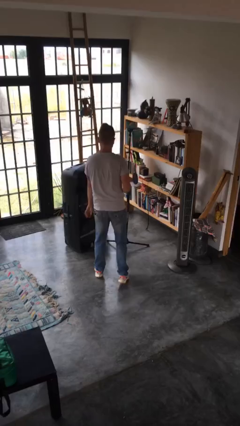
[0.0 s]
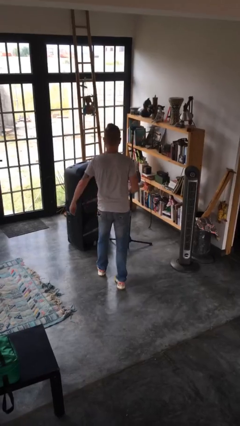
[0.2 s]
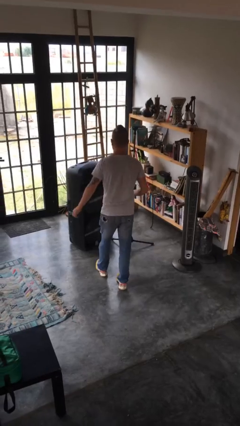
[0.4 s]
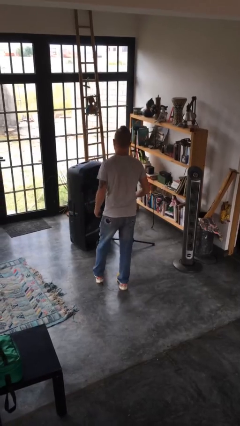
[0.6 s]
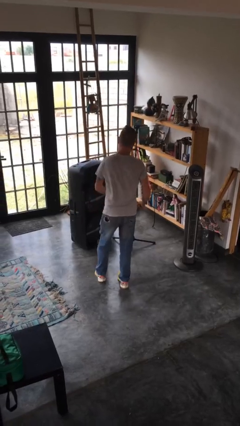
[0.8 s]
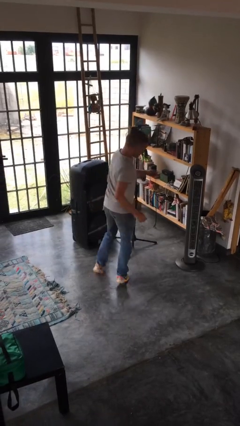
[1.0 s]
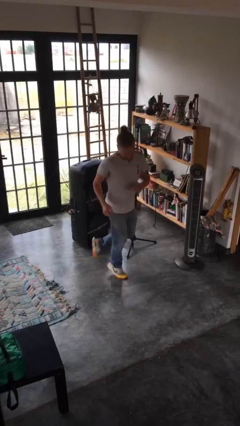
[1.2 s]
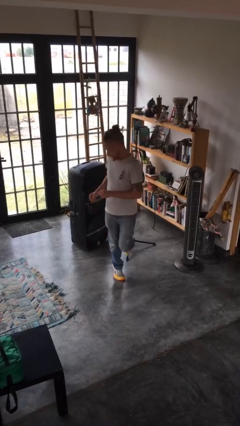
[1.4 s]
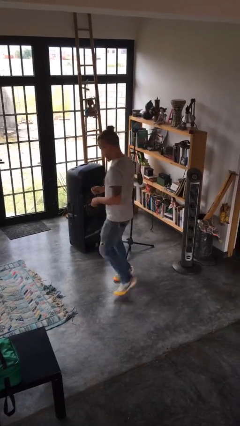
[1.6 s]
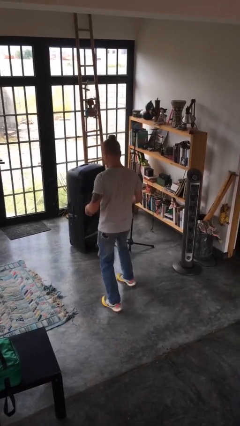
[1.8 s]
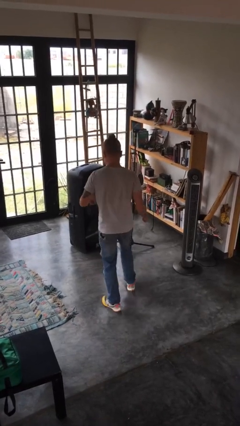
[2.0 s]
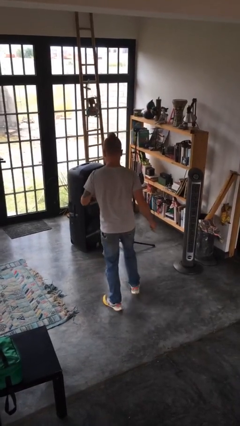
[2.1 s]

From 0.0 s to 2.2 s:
person twirls

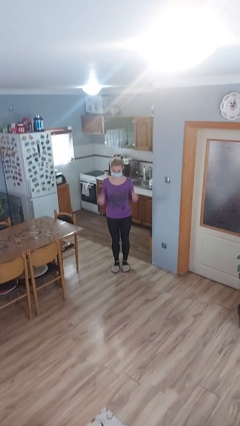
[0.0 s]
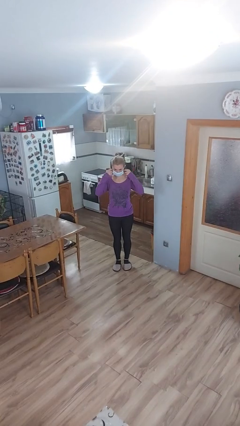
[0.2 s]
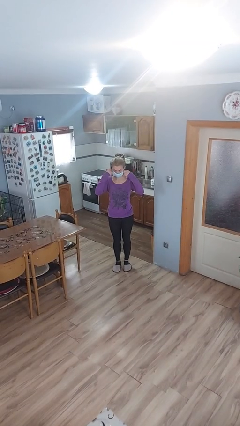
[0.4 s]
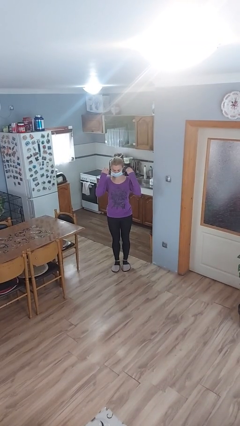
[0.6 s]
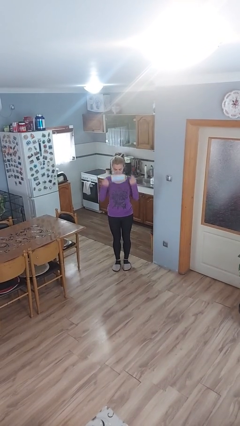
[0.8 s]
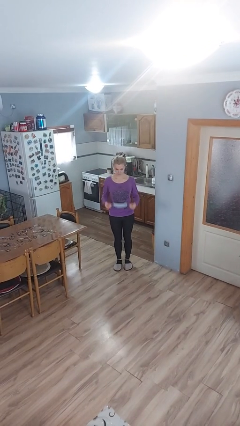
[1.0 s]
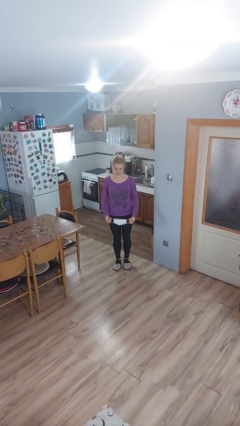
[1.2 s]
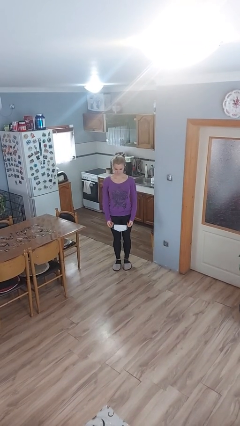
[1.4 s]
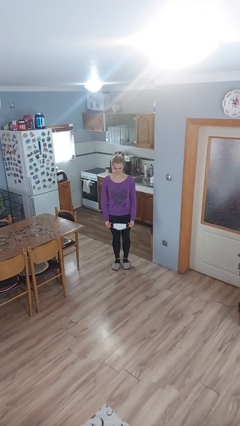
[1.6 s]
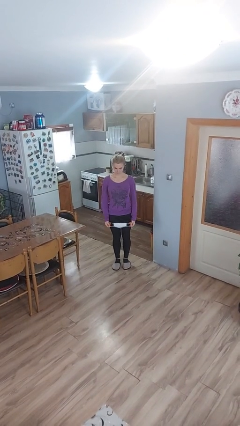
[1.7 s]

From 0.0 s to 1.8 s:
person takes off facemask

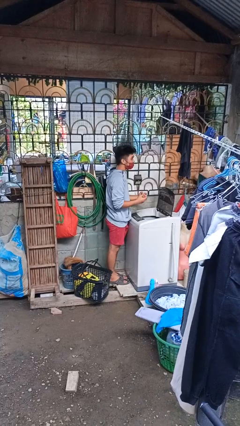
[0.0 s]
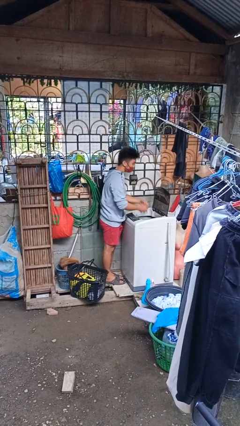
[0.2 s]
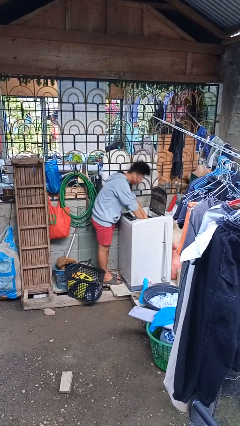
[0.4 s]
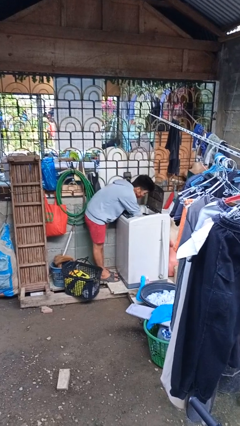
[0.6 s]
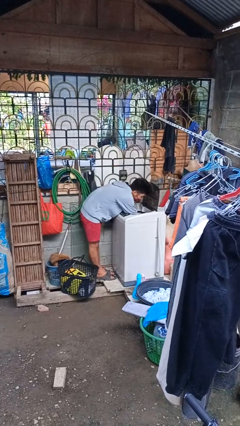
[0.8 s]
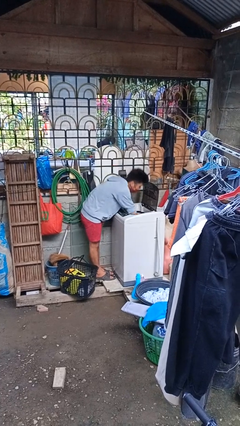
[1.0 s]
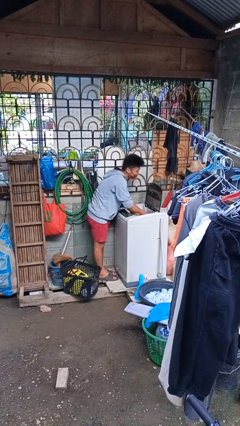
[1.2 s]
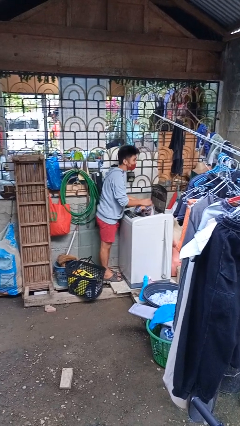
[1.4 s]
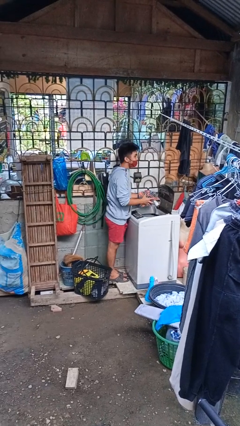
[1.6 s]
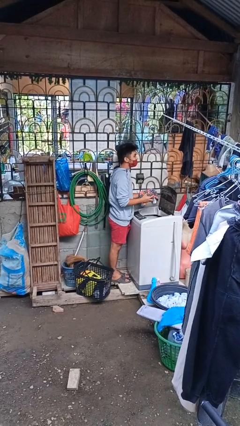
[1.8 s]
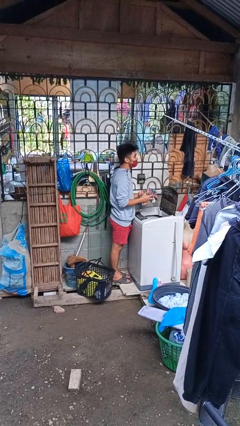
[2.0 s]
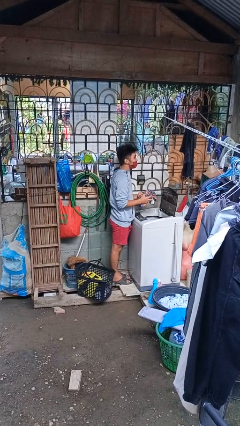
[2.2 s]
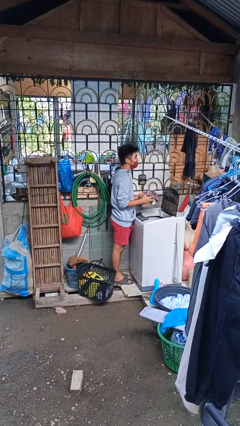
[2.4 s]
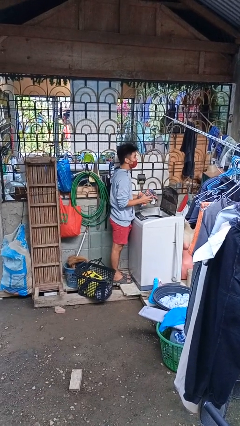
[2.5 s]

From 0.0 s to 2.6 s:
person unloads clotheswasher

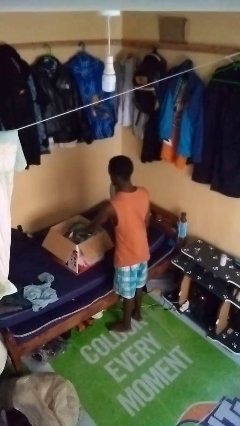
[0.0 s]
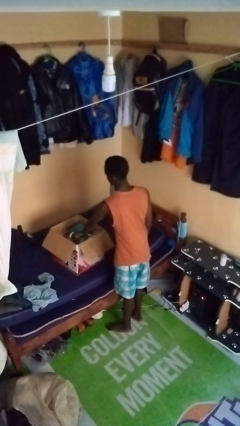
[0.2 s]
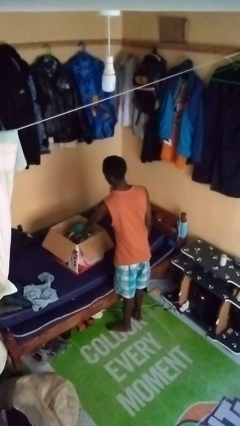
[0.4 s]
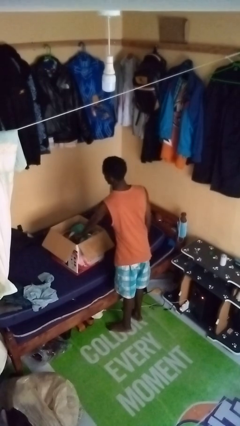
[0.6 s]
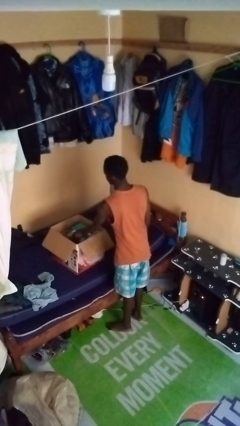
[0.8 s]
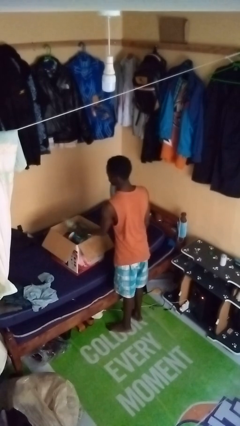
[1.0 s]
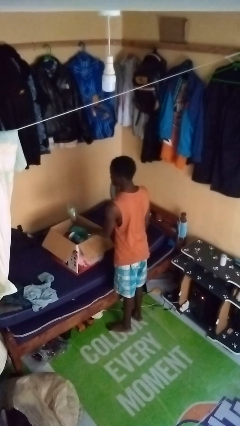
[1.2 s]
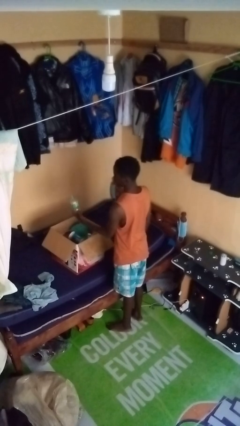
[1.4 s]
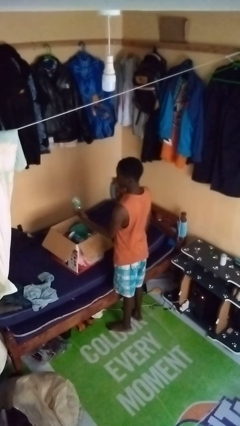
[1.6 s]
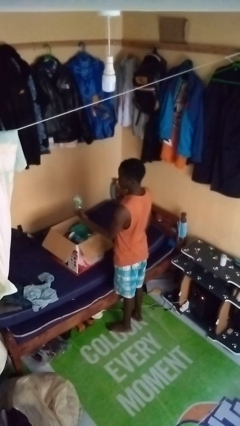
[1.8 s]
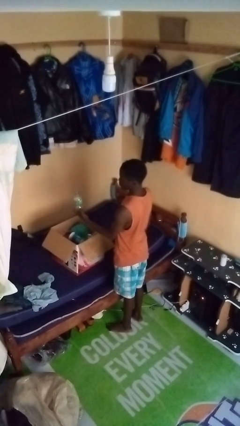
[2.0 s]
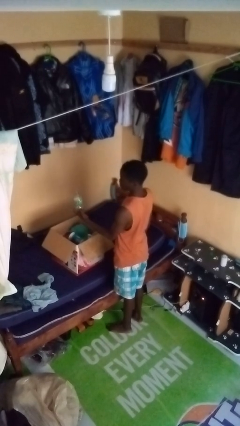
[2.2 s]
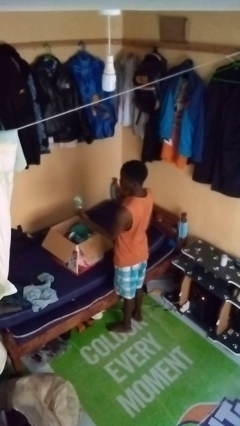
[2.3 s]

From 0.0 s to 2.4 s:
person takes object from box

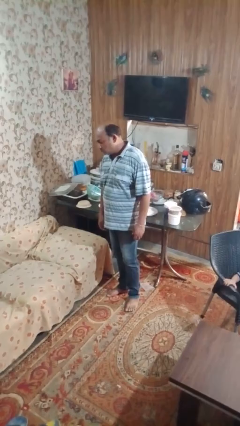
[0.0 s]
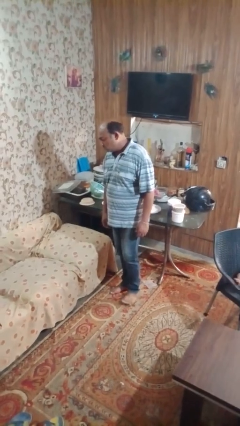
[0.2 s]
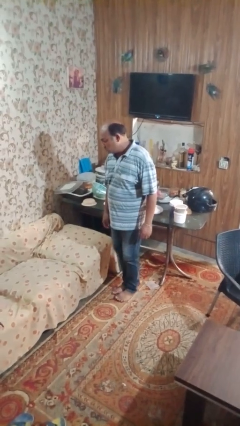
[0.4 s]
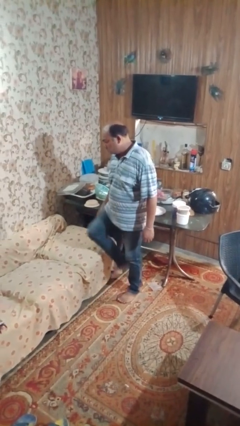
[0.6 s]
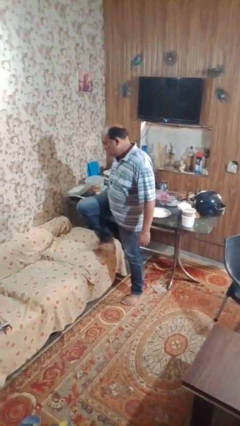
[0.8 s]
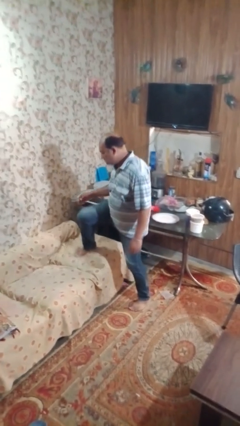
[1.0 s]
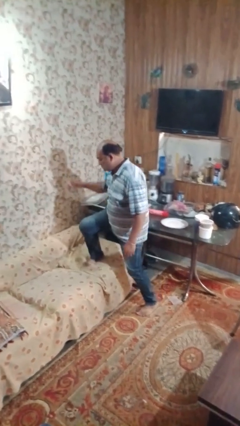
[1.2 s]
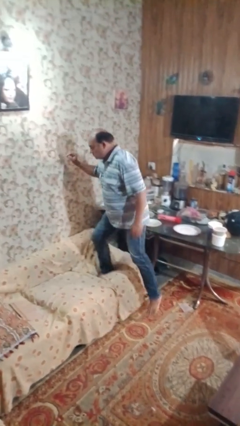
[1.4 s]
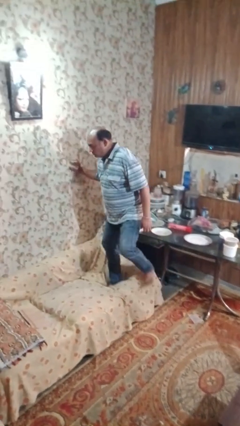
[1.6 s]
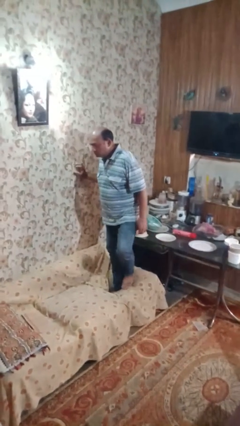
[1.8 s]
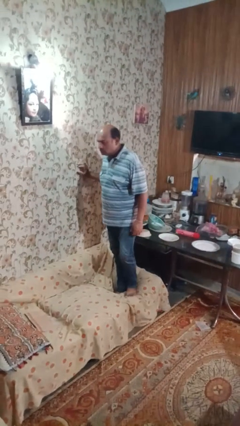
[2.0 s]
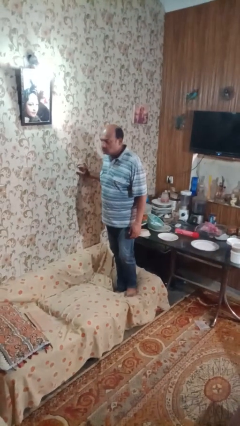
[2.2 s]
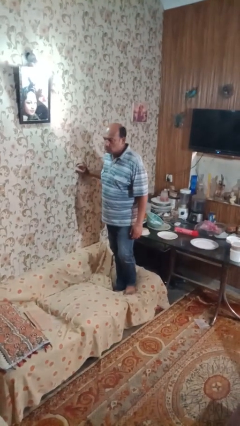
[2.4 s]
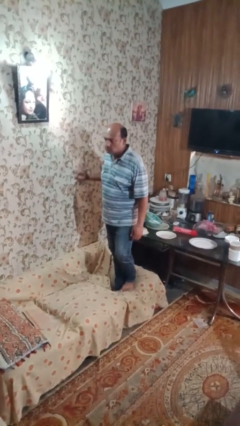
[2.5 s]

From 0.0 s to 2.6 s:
person climbs on couch

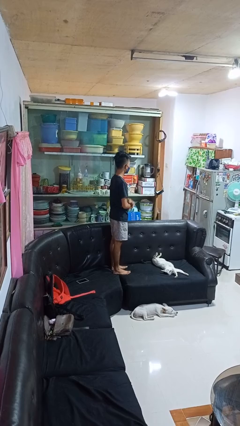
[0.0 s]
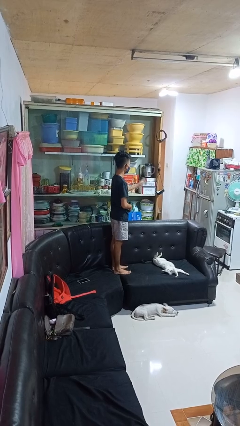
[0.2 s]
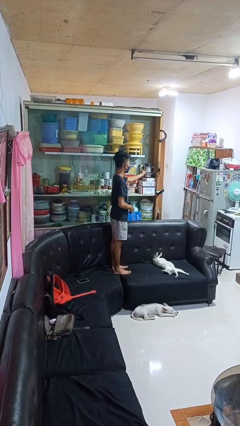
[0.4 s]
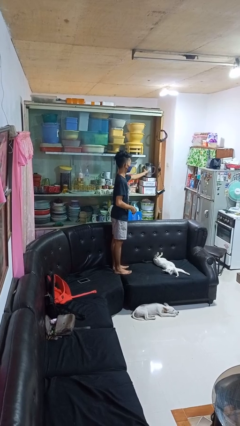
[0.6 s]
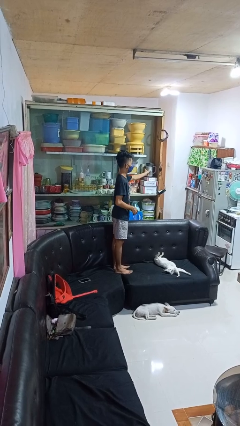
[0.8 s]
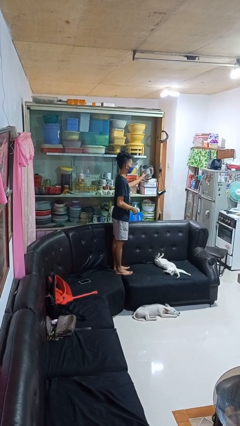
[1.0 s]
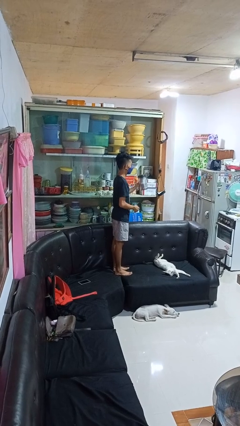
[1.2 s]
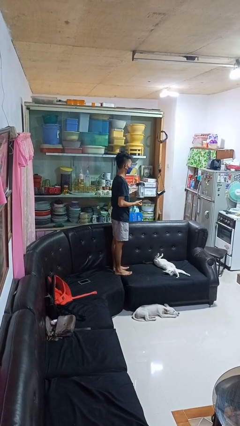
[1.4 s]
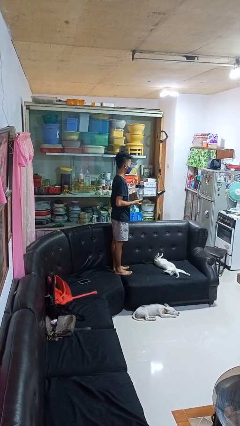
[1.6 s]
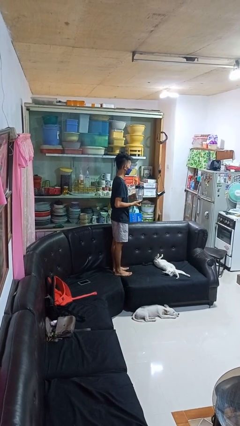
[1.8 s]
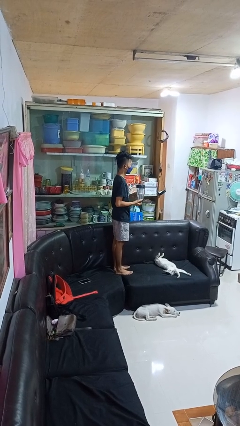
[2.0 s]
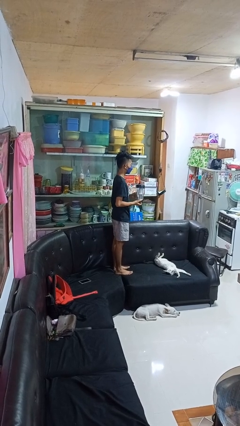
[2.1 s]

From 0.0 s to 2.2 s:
person picks up object from cabinet

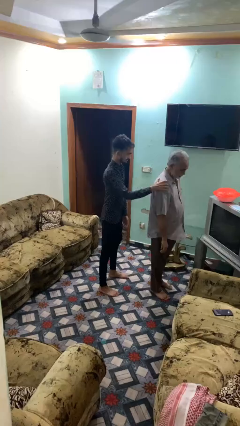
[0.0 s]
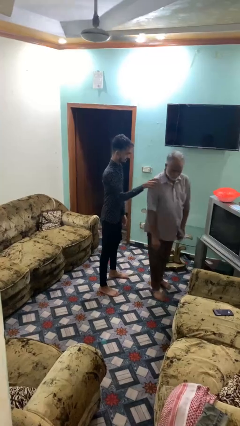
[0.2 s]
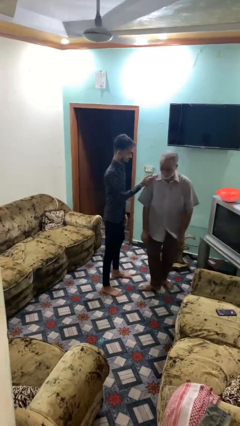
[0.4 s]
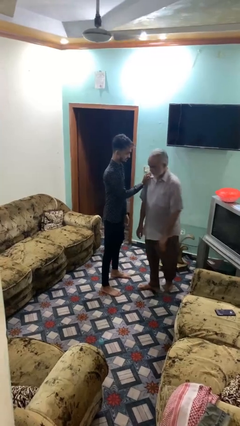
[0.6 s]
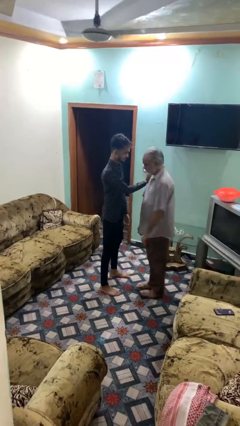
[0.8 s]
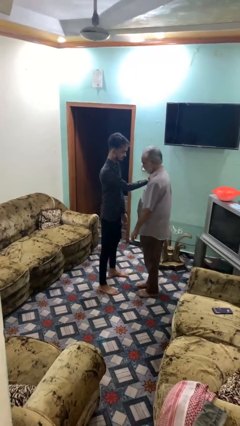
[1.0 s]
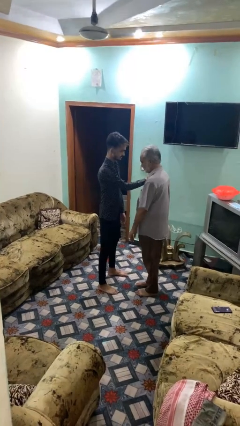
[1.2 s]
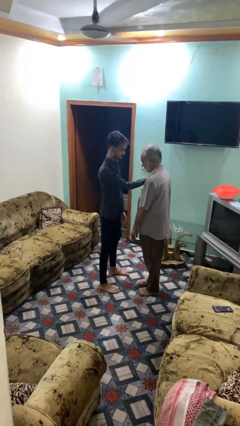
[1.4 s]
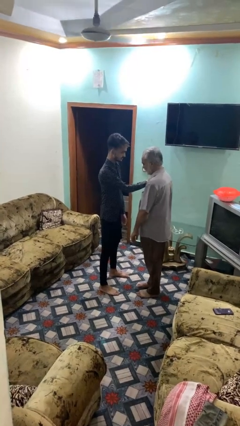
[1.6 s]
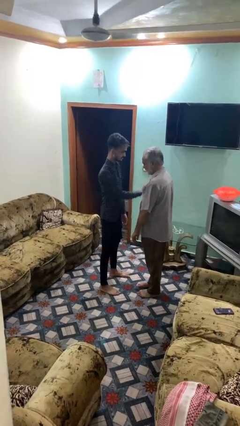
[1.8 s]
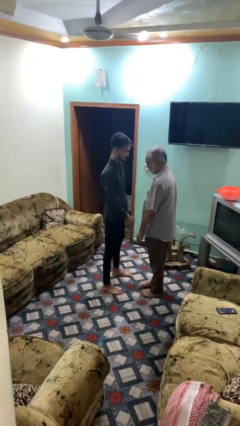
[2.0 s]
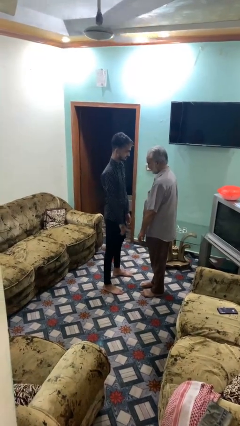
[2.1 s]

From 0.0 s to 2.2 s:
person spins person around

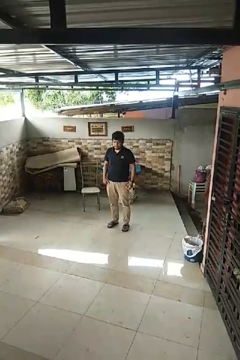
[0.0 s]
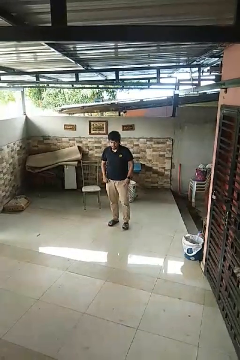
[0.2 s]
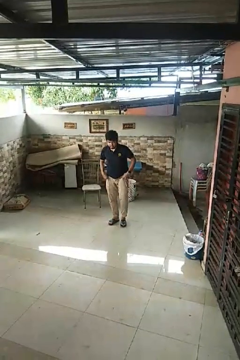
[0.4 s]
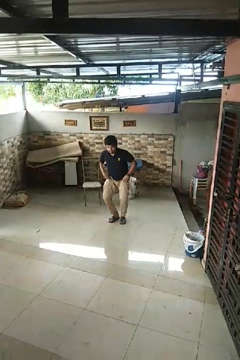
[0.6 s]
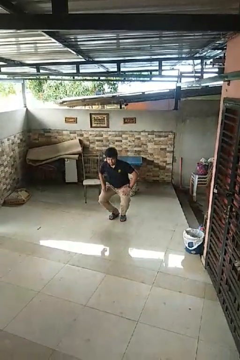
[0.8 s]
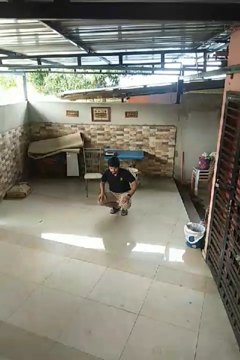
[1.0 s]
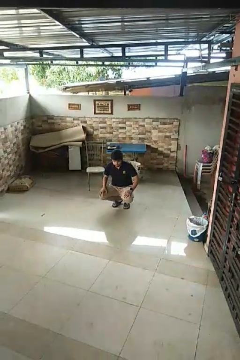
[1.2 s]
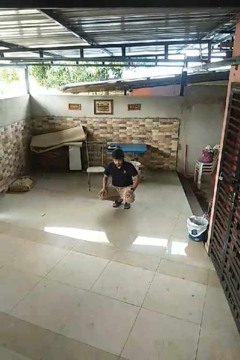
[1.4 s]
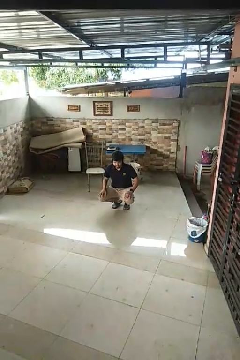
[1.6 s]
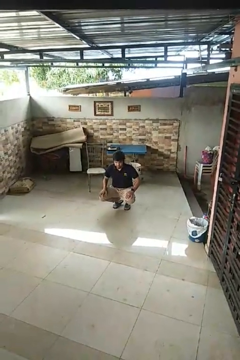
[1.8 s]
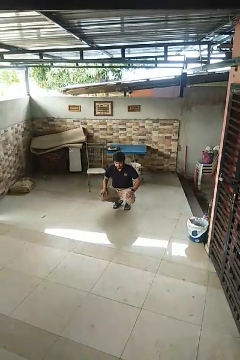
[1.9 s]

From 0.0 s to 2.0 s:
person squats
